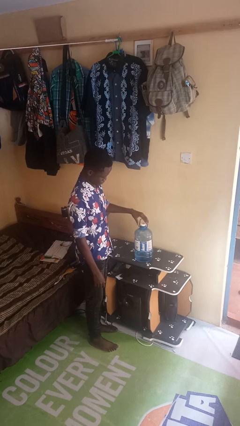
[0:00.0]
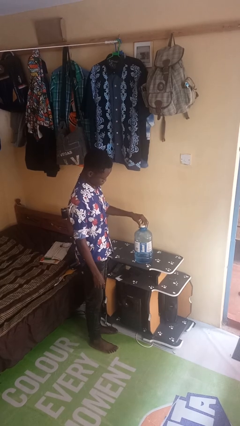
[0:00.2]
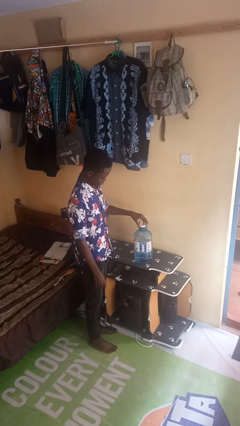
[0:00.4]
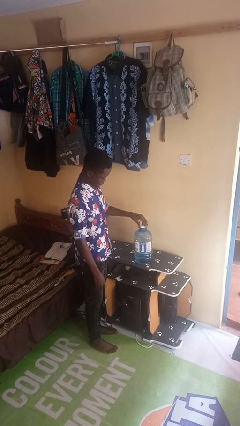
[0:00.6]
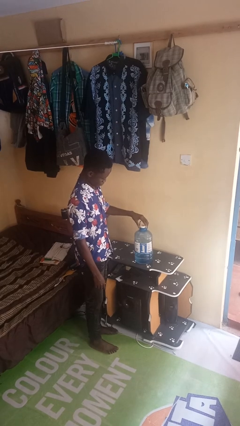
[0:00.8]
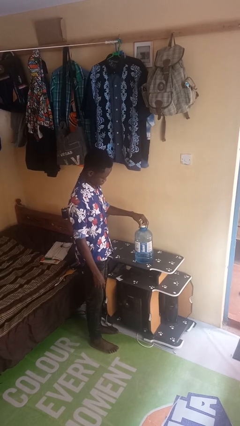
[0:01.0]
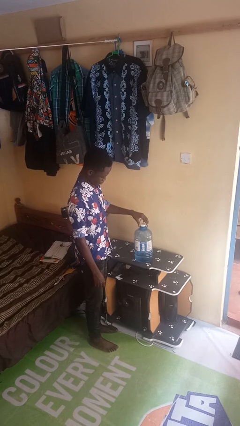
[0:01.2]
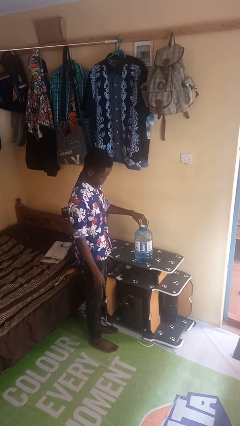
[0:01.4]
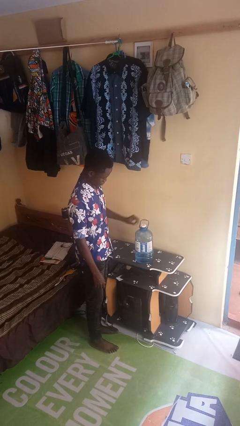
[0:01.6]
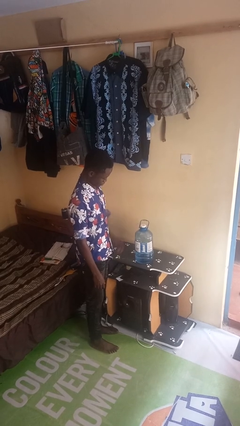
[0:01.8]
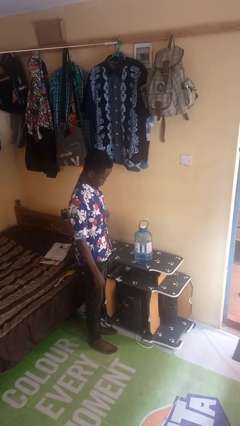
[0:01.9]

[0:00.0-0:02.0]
person screws lid to bottle

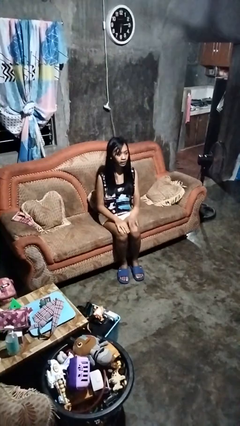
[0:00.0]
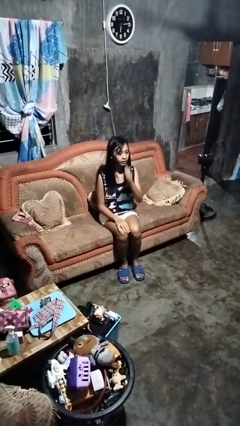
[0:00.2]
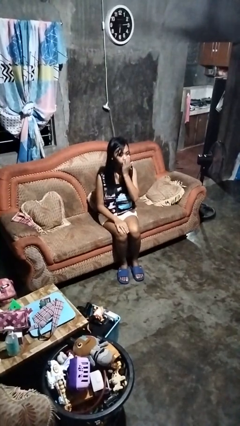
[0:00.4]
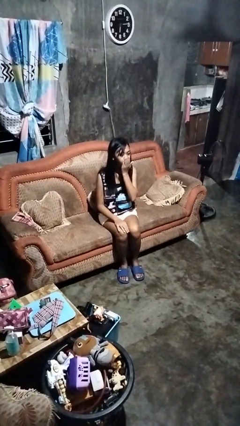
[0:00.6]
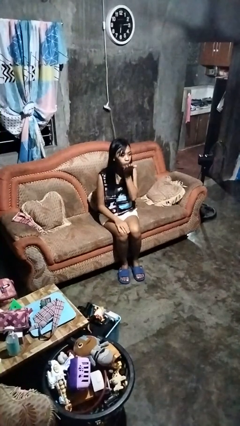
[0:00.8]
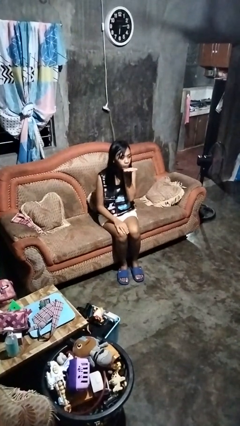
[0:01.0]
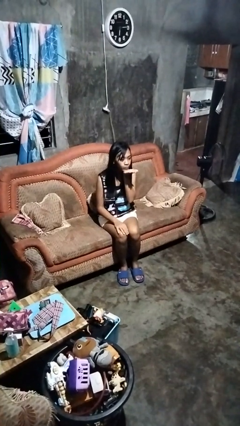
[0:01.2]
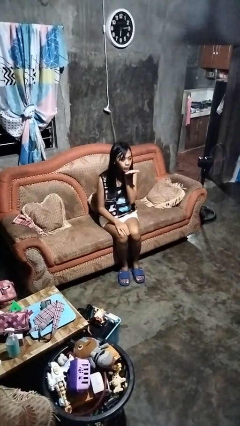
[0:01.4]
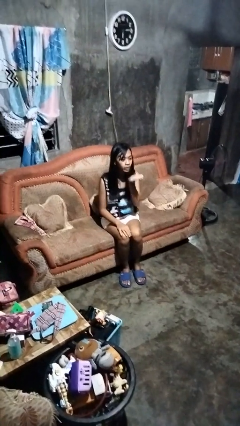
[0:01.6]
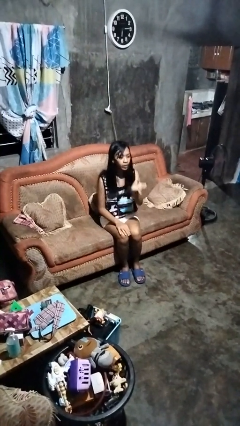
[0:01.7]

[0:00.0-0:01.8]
person gestures blow kiss

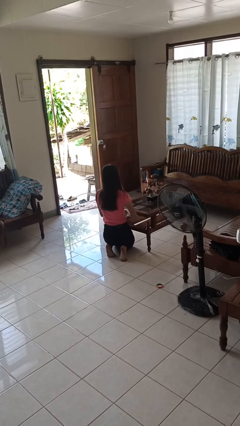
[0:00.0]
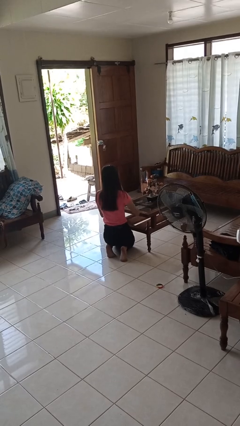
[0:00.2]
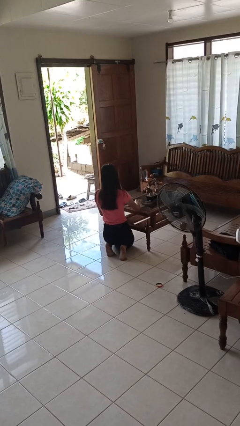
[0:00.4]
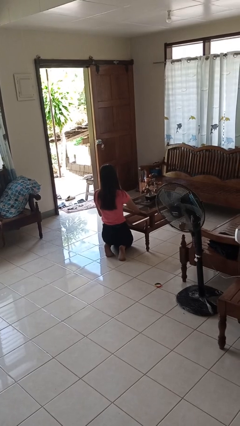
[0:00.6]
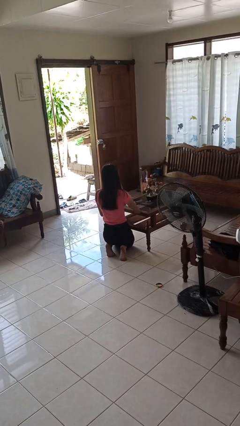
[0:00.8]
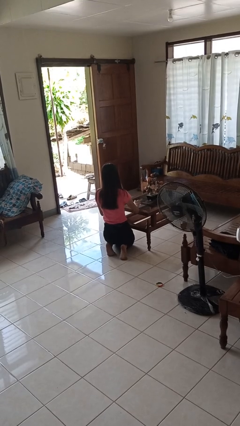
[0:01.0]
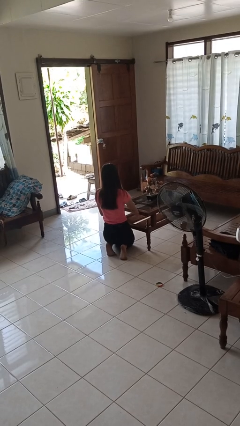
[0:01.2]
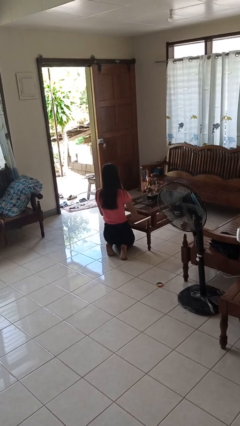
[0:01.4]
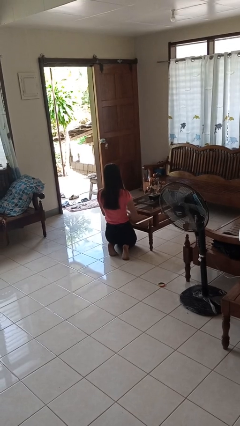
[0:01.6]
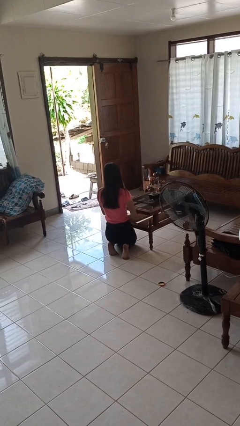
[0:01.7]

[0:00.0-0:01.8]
person cleans table with rag

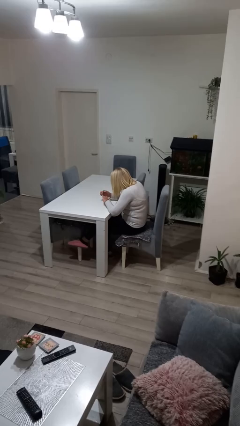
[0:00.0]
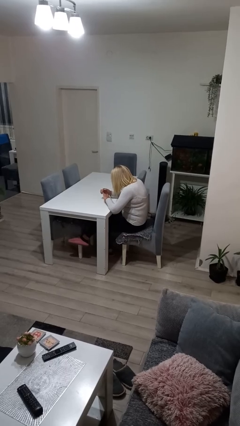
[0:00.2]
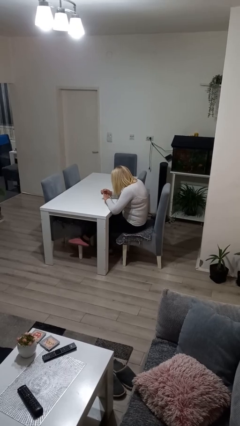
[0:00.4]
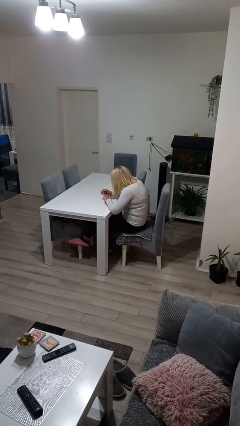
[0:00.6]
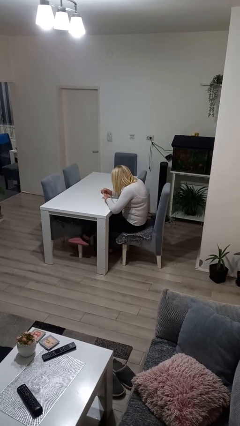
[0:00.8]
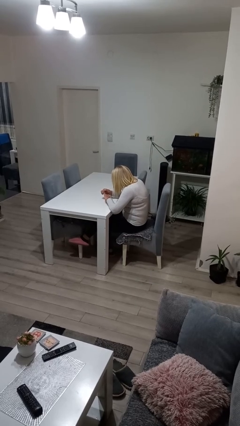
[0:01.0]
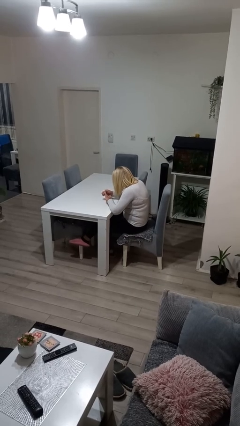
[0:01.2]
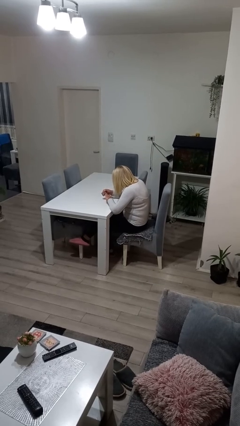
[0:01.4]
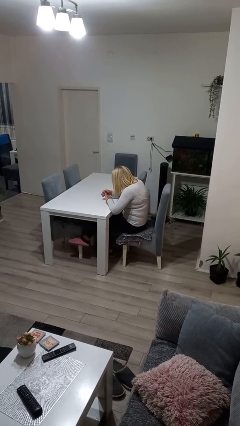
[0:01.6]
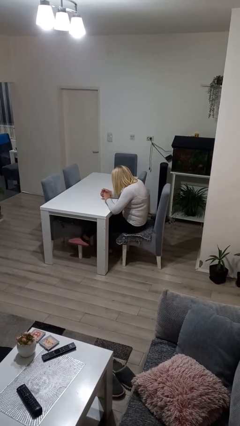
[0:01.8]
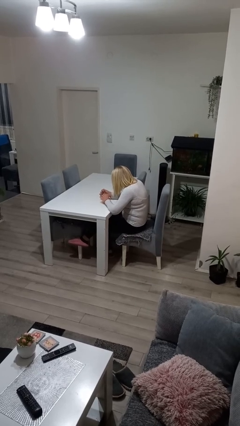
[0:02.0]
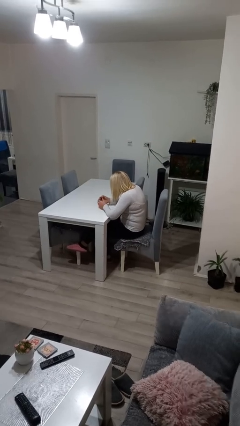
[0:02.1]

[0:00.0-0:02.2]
person clips fingernails

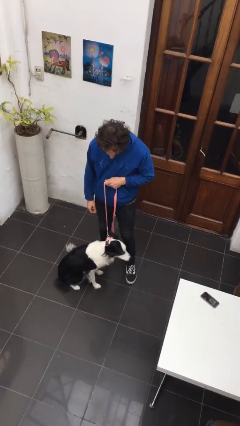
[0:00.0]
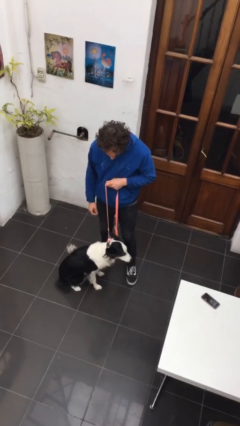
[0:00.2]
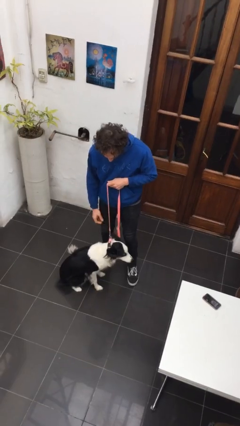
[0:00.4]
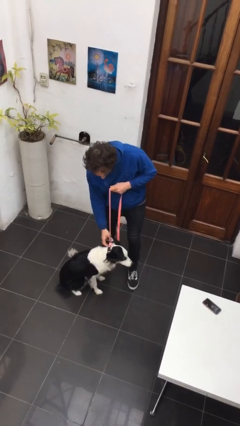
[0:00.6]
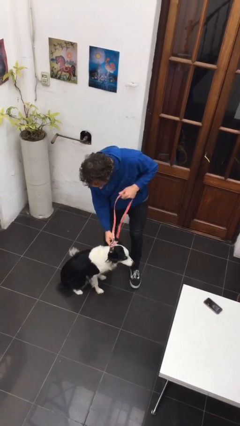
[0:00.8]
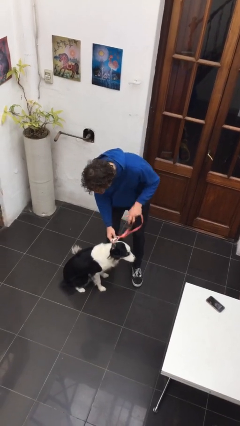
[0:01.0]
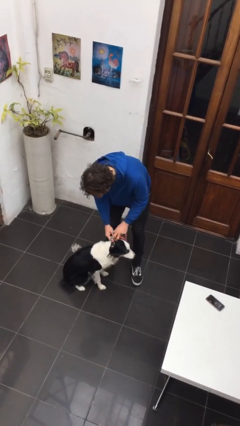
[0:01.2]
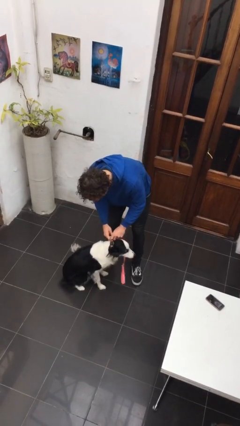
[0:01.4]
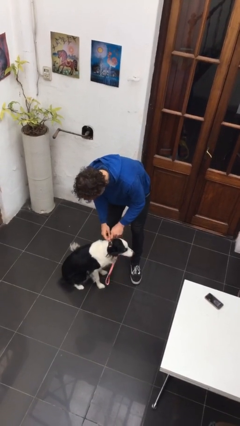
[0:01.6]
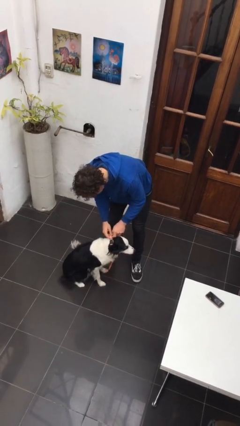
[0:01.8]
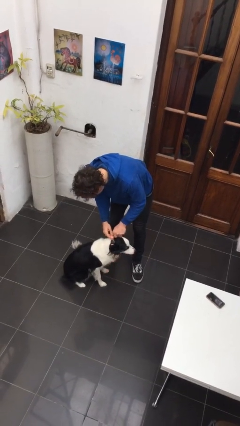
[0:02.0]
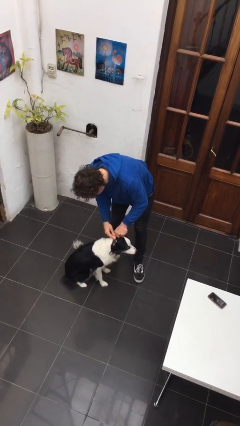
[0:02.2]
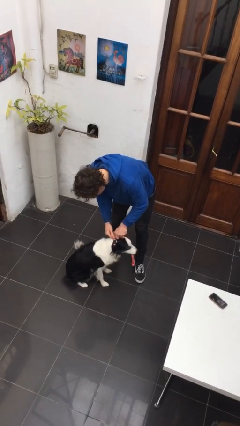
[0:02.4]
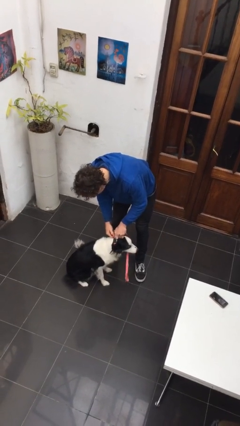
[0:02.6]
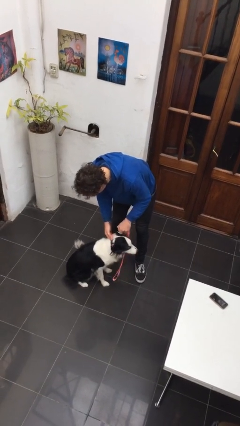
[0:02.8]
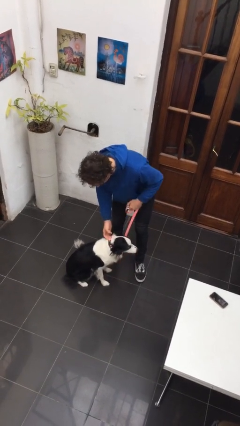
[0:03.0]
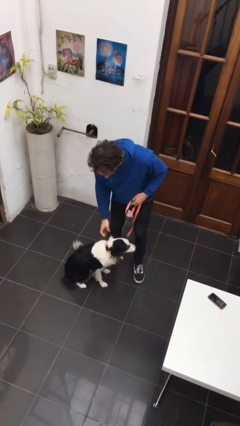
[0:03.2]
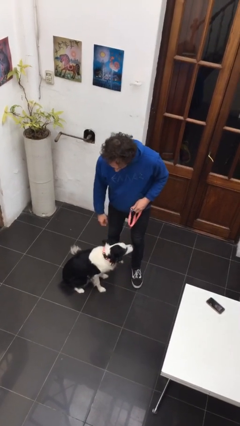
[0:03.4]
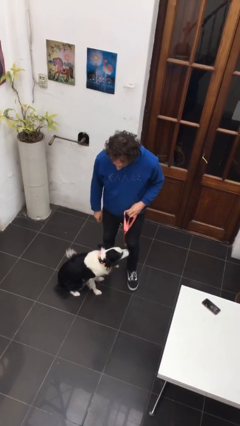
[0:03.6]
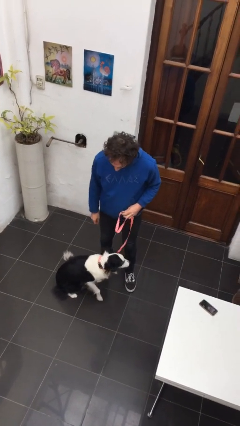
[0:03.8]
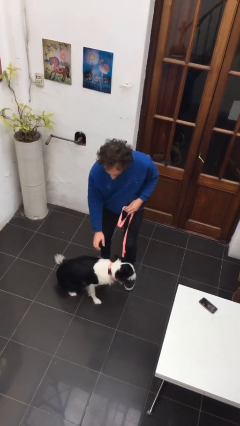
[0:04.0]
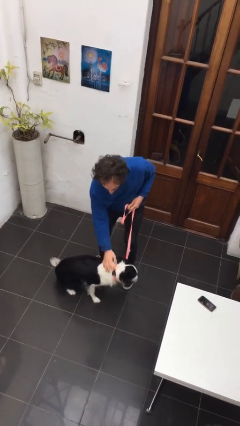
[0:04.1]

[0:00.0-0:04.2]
person unattaches leash from dog

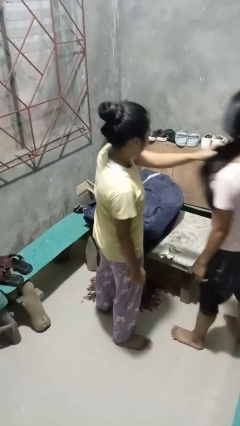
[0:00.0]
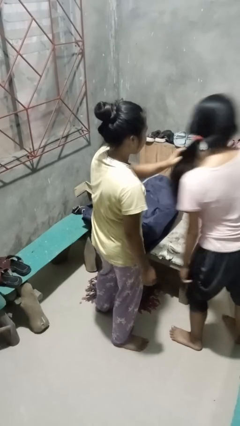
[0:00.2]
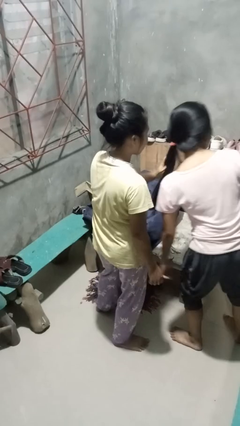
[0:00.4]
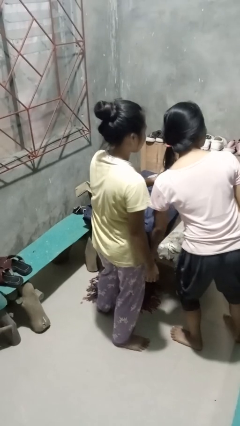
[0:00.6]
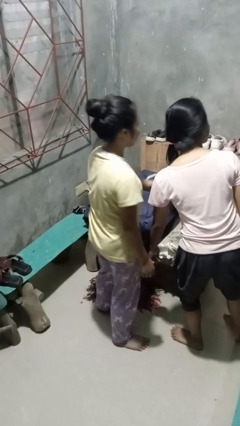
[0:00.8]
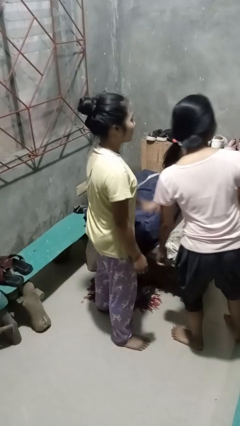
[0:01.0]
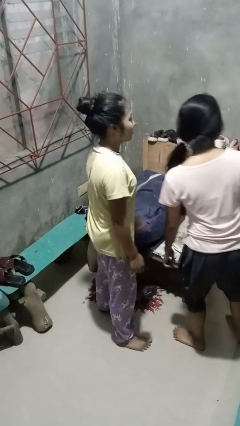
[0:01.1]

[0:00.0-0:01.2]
person grabs person by hair

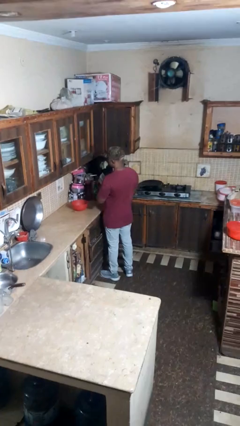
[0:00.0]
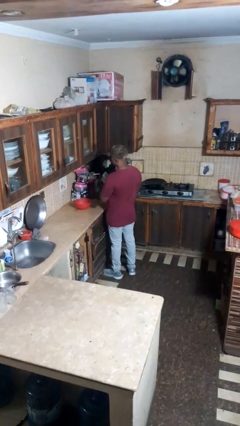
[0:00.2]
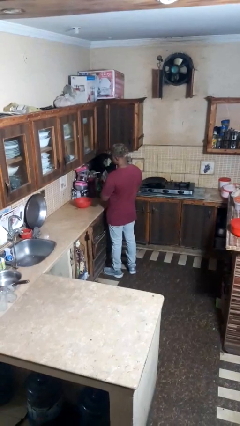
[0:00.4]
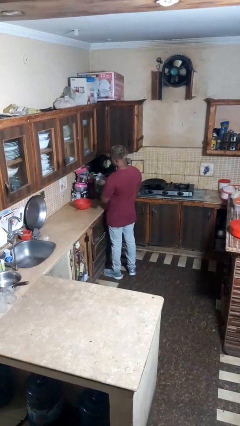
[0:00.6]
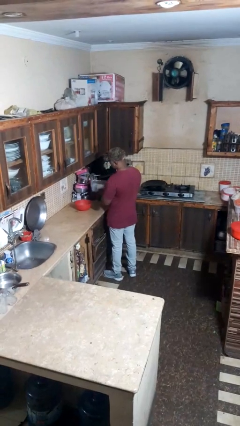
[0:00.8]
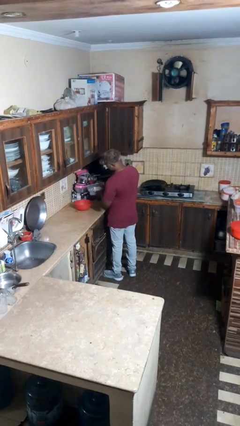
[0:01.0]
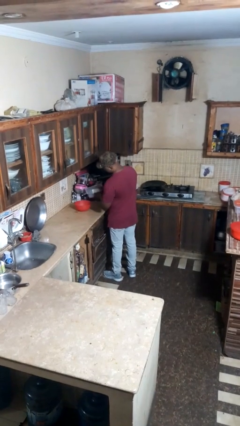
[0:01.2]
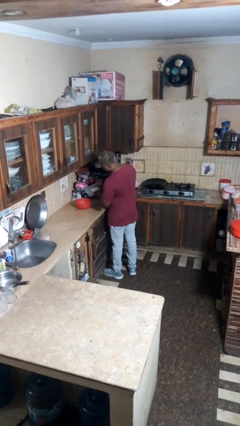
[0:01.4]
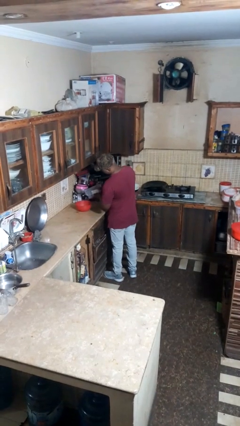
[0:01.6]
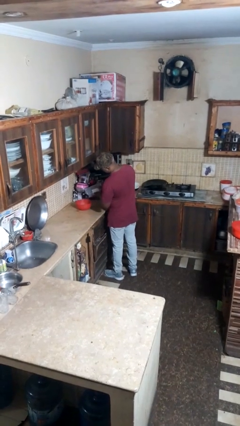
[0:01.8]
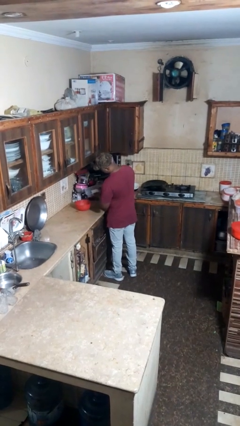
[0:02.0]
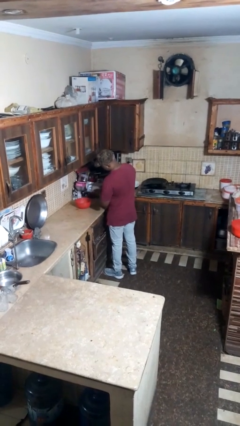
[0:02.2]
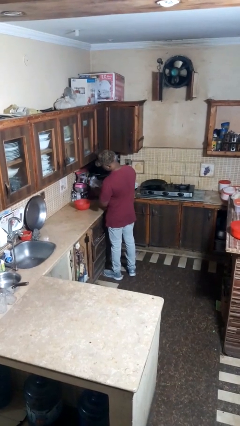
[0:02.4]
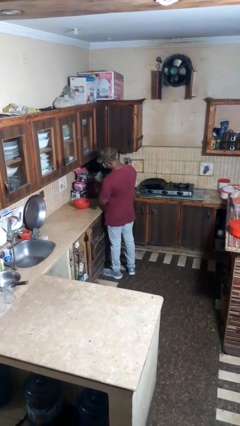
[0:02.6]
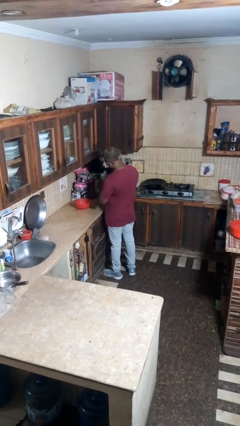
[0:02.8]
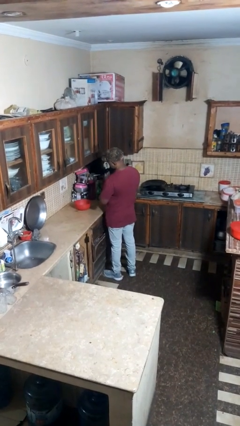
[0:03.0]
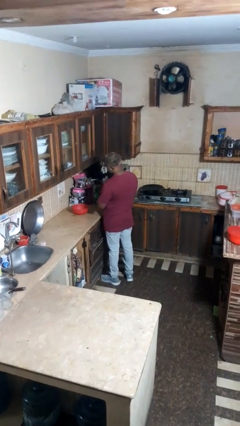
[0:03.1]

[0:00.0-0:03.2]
person pours into bowl

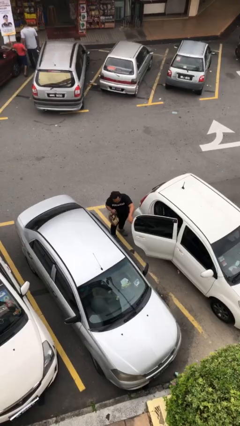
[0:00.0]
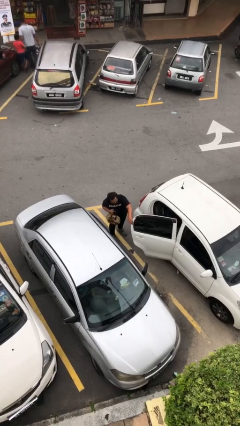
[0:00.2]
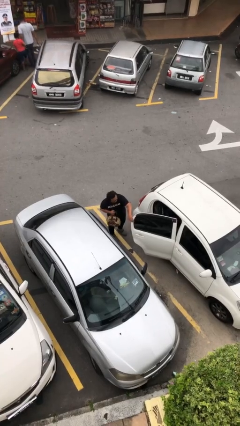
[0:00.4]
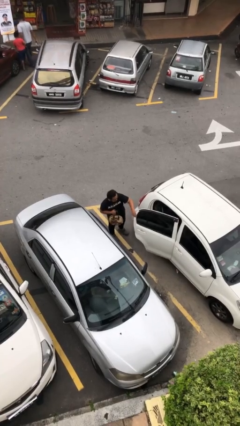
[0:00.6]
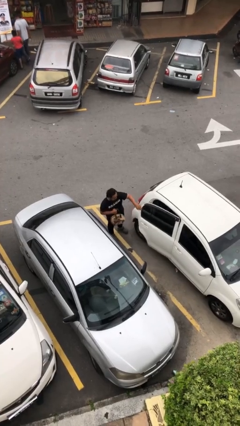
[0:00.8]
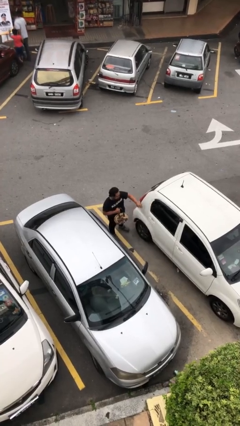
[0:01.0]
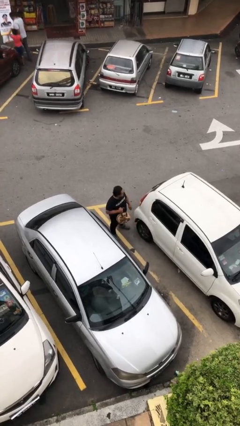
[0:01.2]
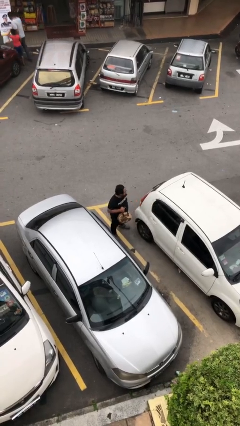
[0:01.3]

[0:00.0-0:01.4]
person closes car door
